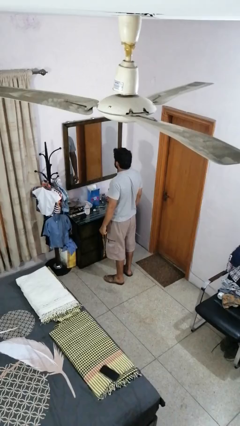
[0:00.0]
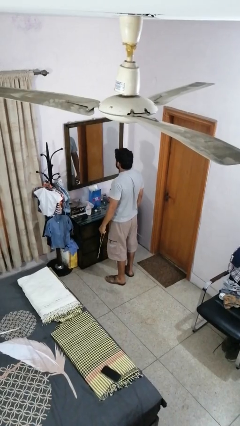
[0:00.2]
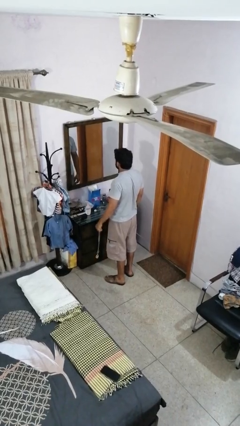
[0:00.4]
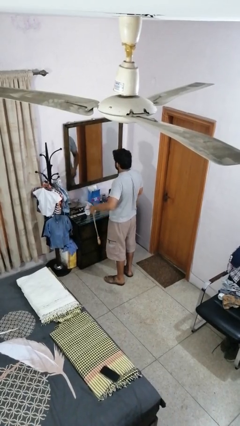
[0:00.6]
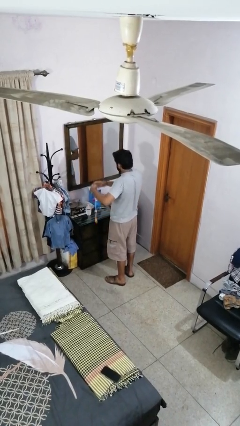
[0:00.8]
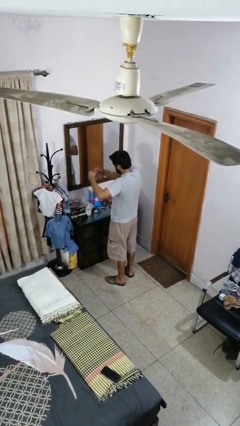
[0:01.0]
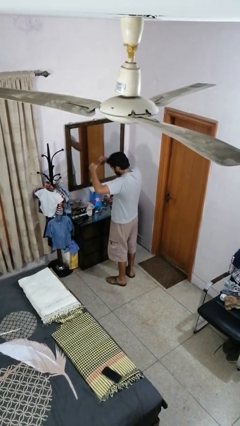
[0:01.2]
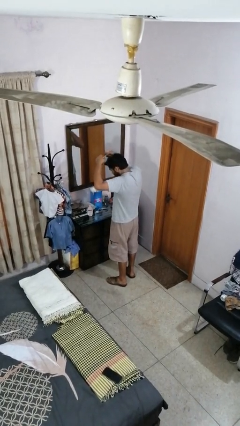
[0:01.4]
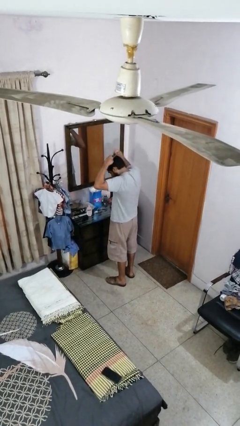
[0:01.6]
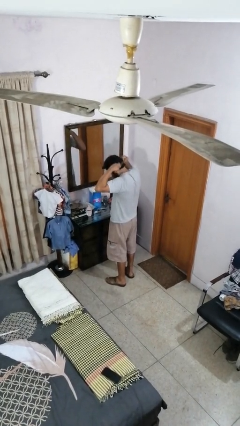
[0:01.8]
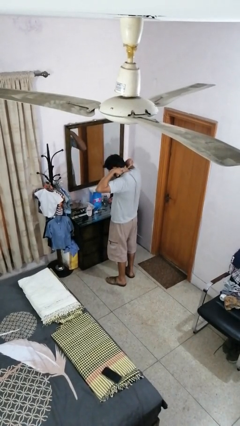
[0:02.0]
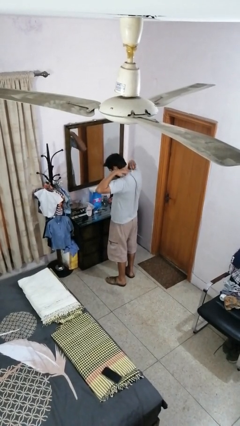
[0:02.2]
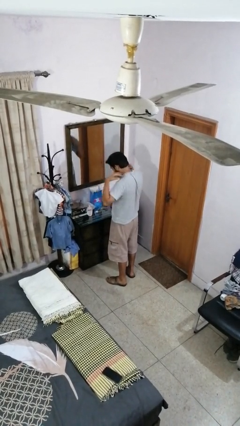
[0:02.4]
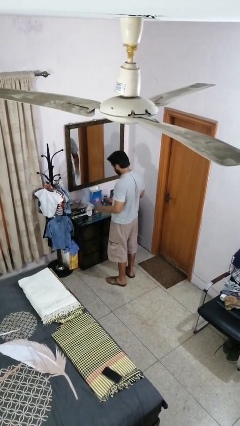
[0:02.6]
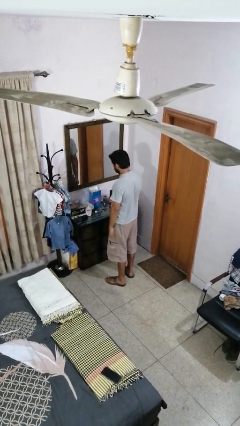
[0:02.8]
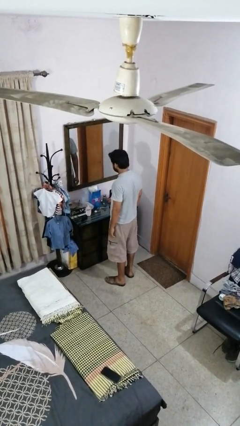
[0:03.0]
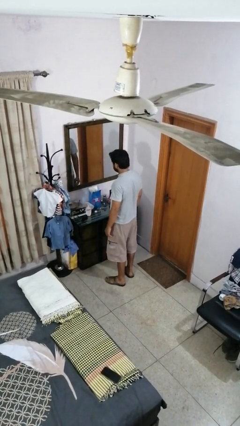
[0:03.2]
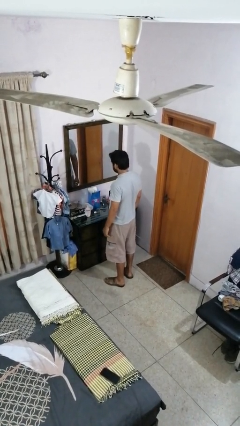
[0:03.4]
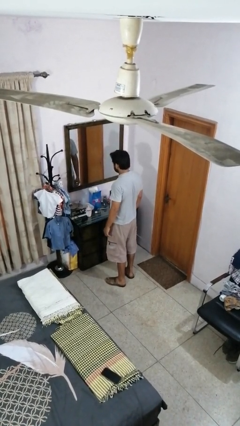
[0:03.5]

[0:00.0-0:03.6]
person puts on necklace

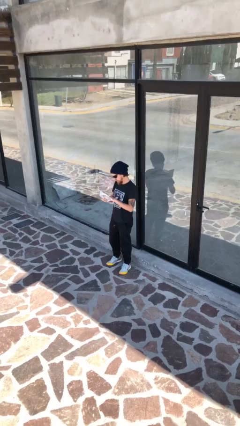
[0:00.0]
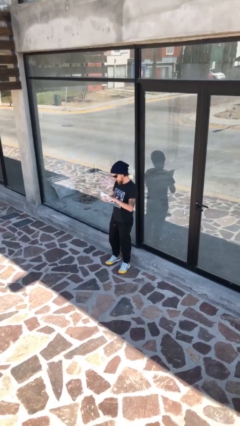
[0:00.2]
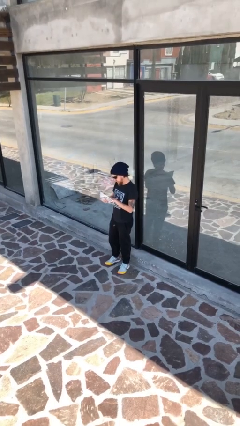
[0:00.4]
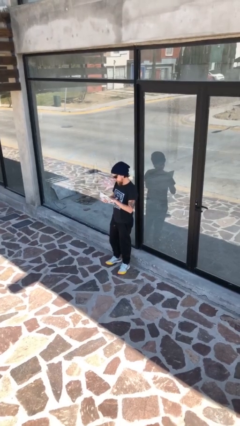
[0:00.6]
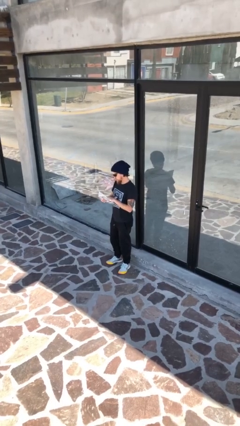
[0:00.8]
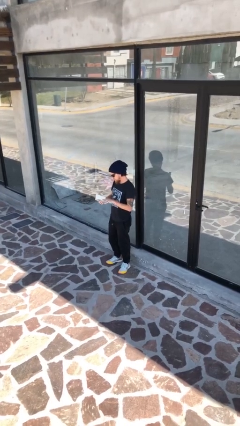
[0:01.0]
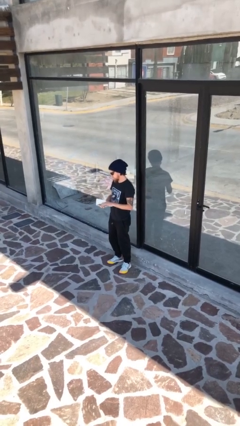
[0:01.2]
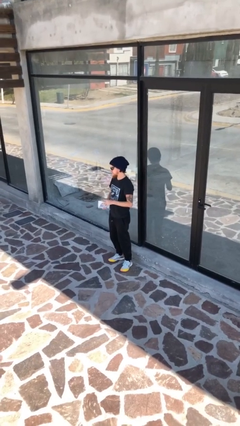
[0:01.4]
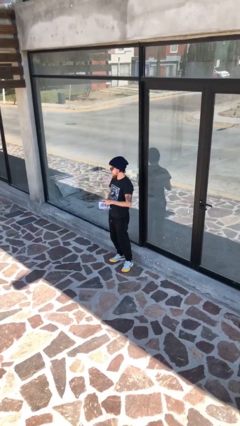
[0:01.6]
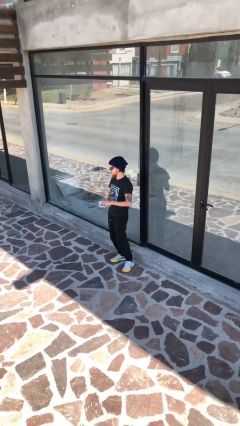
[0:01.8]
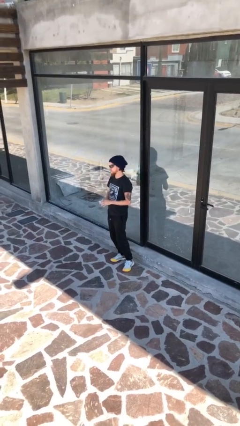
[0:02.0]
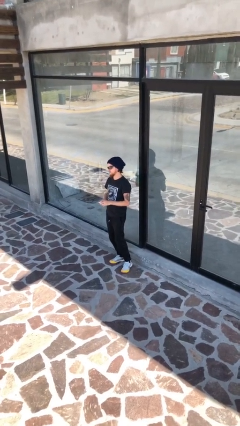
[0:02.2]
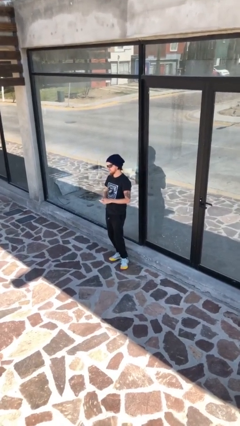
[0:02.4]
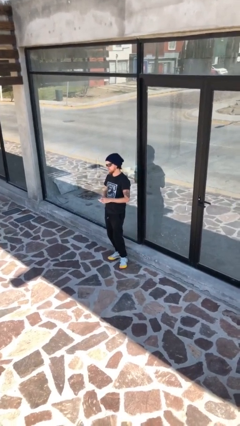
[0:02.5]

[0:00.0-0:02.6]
person reads document

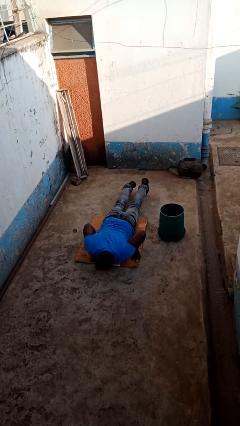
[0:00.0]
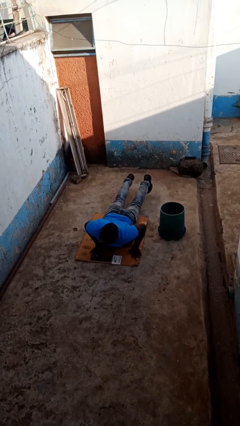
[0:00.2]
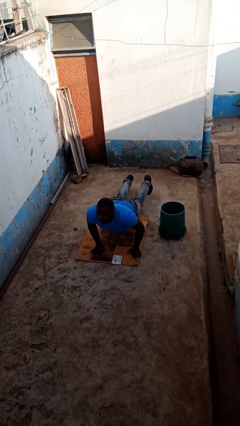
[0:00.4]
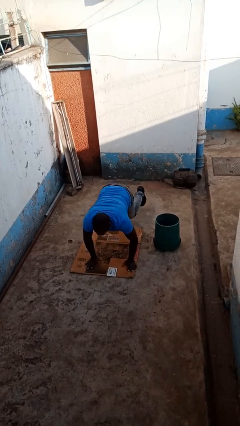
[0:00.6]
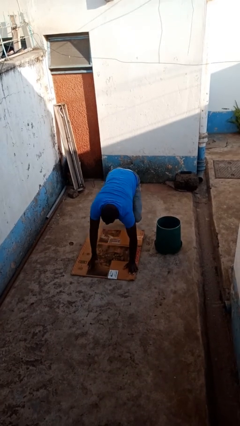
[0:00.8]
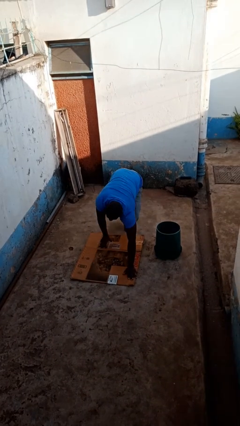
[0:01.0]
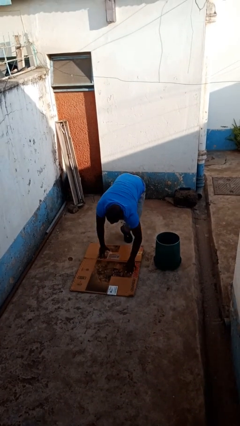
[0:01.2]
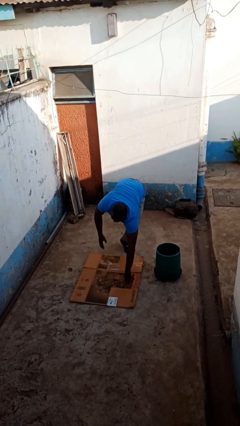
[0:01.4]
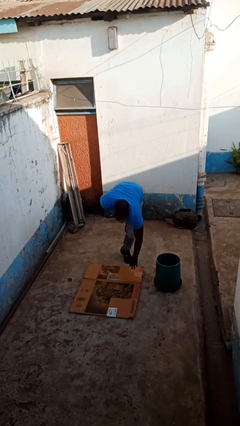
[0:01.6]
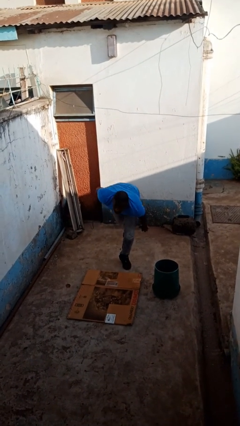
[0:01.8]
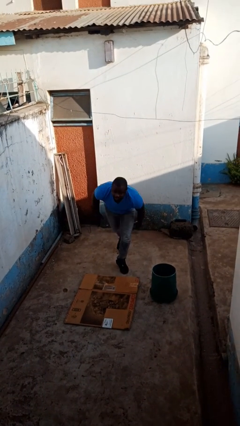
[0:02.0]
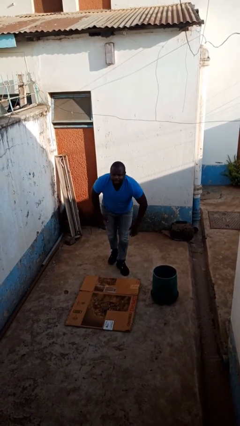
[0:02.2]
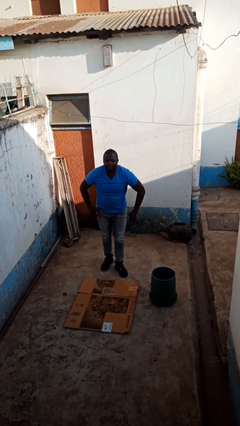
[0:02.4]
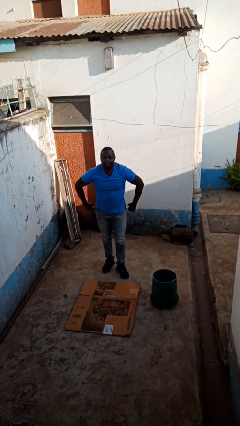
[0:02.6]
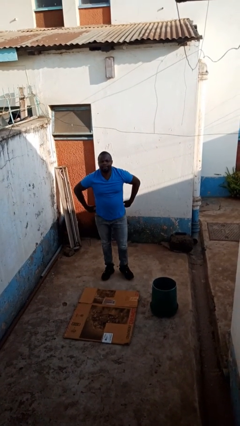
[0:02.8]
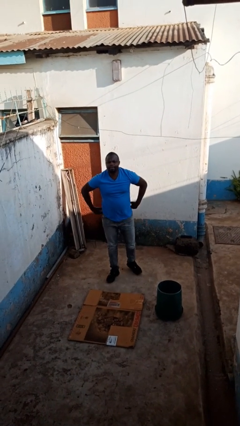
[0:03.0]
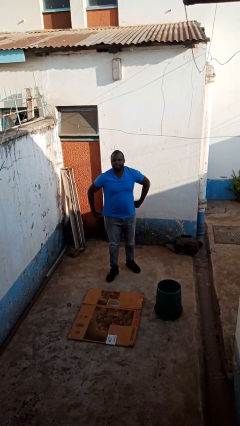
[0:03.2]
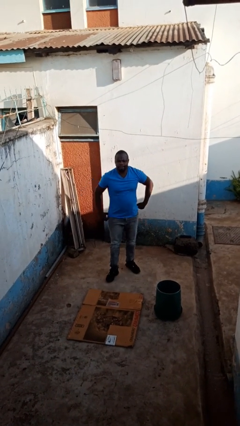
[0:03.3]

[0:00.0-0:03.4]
person stands up from floor

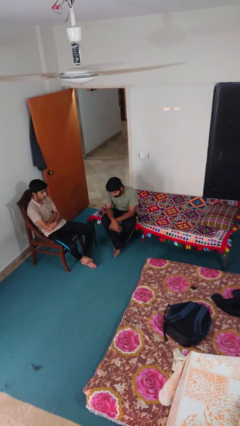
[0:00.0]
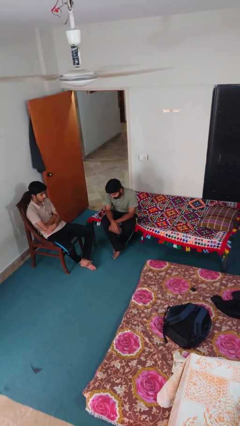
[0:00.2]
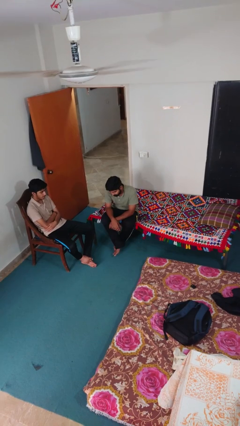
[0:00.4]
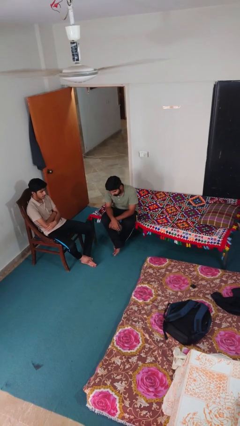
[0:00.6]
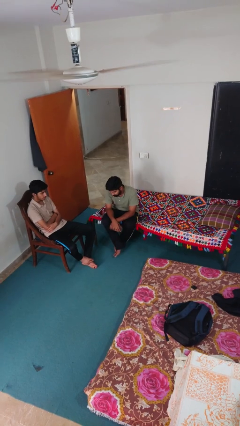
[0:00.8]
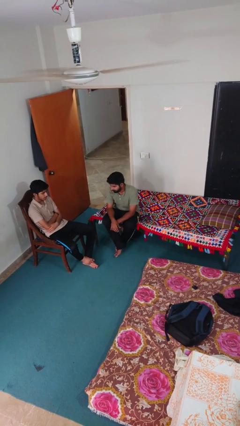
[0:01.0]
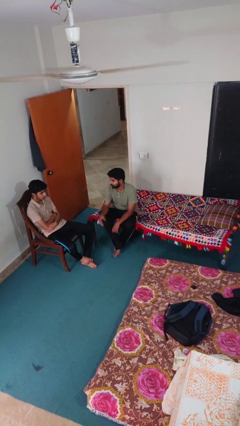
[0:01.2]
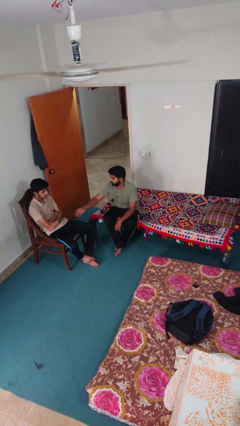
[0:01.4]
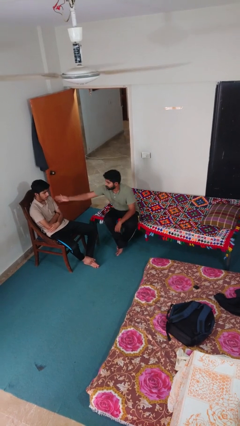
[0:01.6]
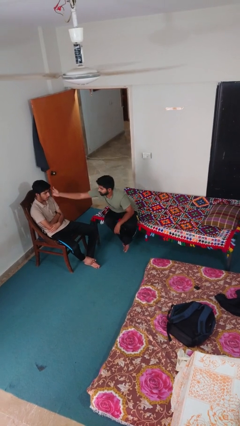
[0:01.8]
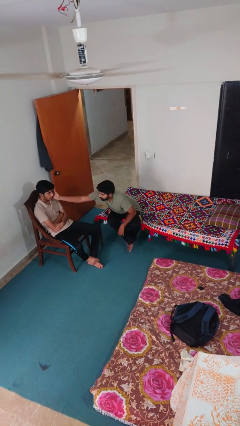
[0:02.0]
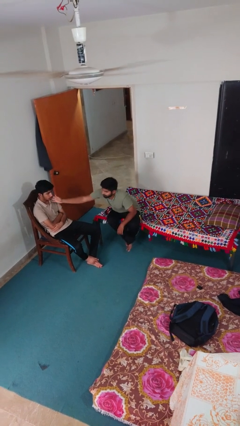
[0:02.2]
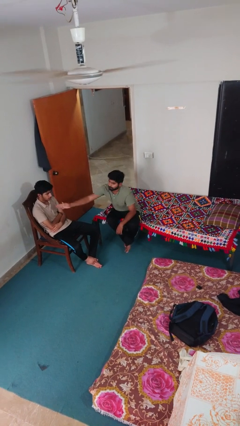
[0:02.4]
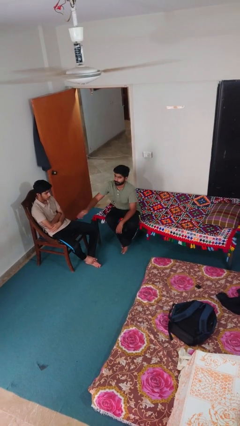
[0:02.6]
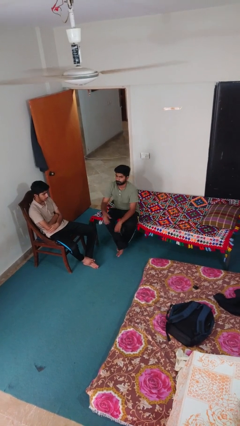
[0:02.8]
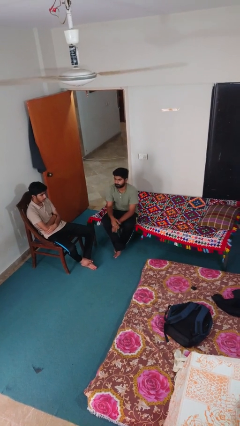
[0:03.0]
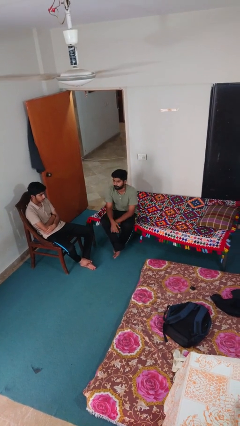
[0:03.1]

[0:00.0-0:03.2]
person touches face of person

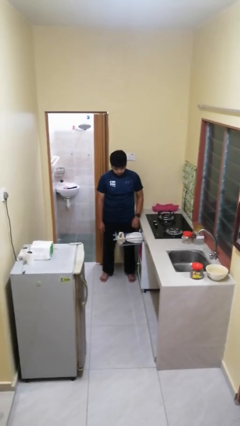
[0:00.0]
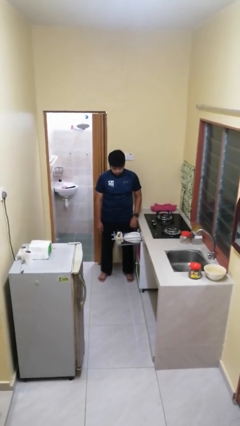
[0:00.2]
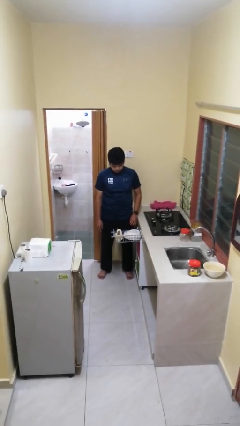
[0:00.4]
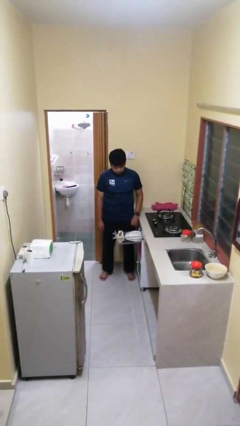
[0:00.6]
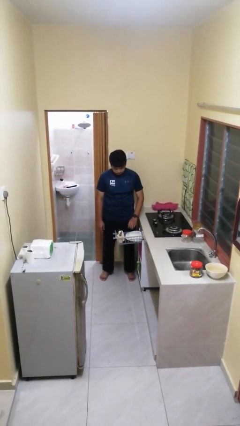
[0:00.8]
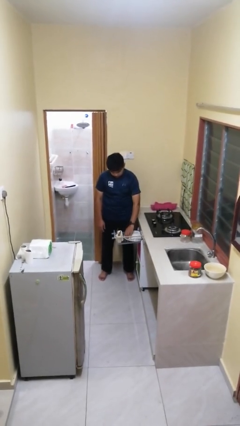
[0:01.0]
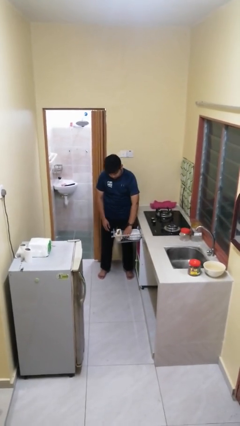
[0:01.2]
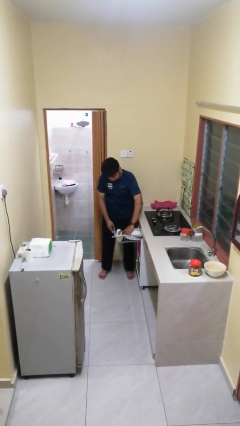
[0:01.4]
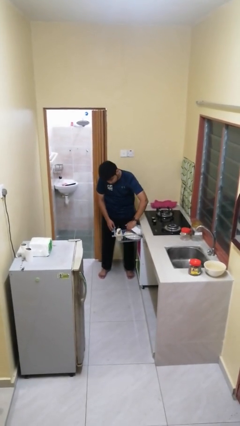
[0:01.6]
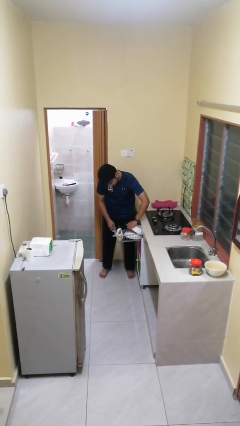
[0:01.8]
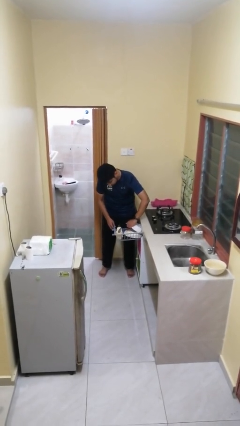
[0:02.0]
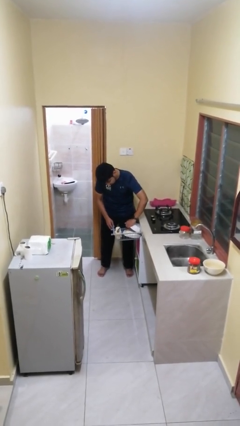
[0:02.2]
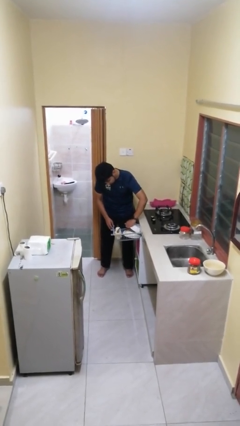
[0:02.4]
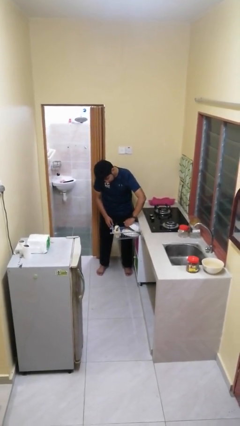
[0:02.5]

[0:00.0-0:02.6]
person searches in kitchen drawer

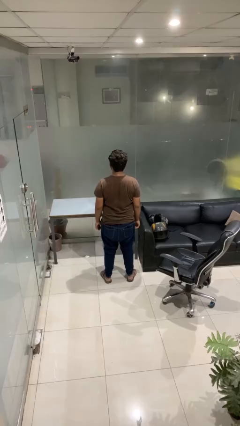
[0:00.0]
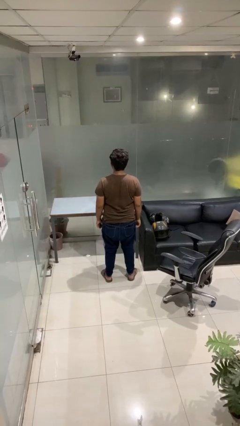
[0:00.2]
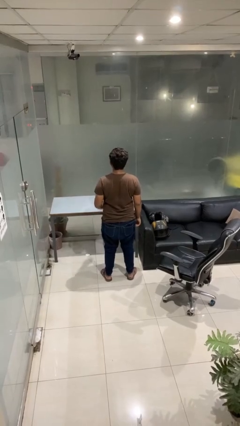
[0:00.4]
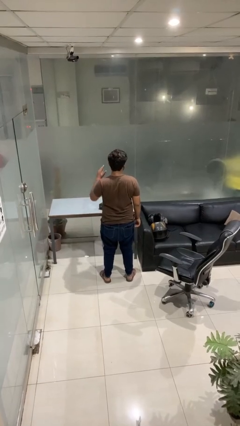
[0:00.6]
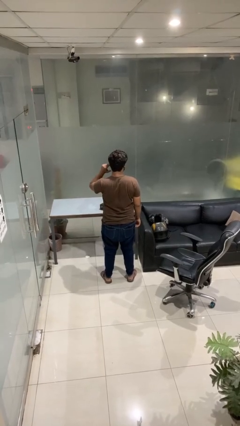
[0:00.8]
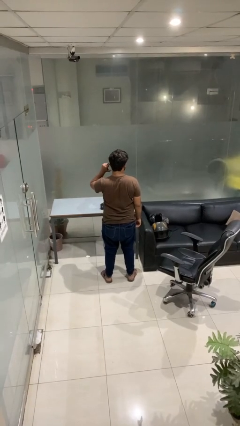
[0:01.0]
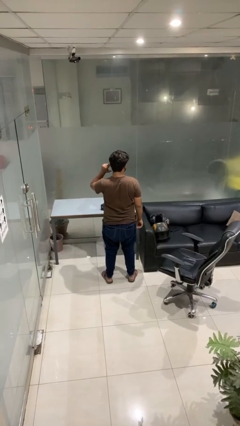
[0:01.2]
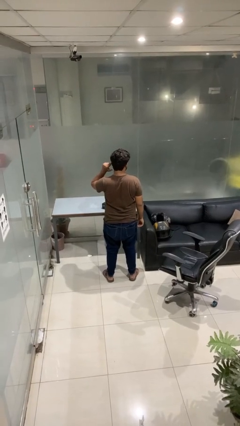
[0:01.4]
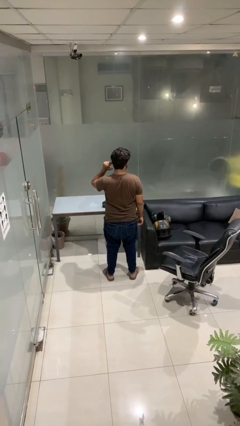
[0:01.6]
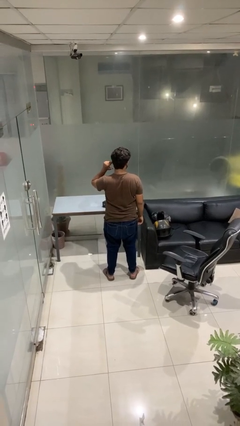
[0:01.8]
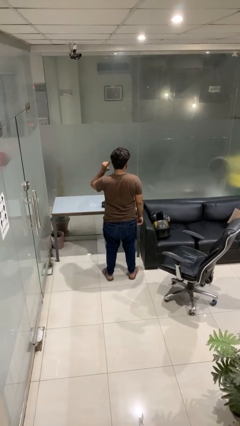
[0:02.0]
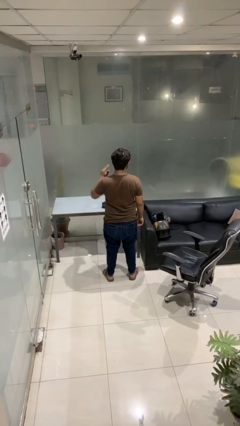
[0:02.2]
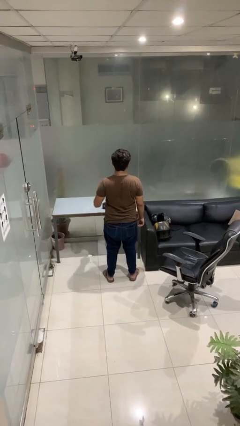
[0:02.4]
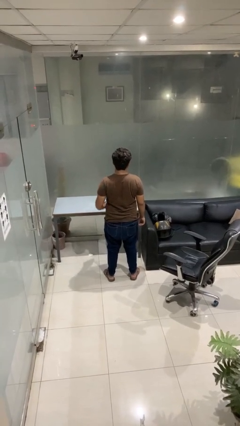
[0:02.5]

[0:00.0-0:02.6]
person gestures listen closely
